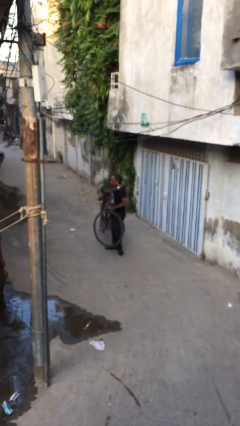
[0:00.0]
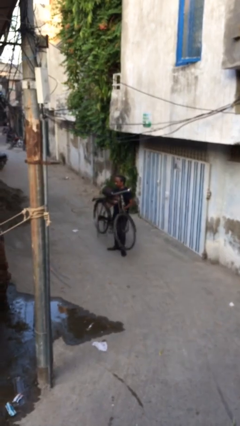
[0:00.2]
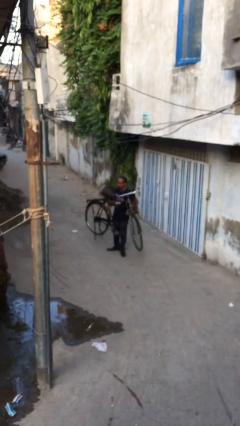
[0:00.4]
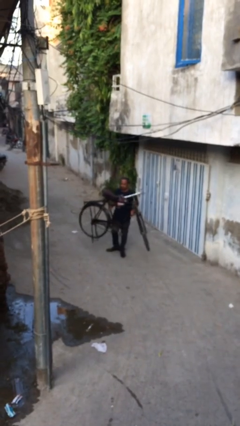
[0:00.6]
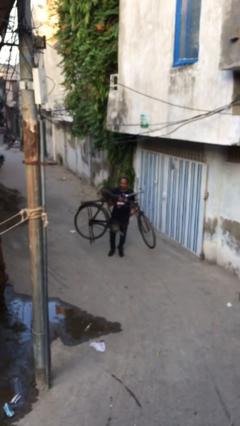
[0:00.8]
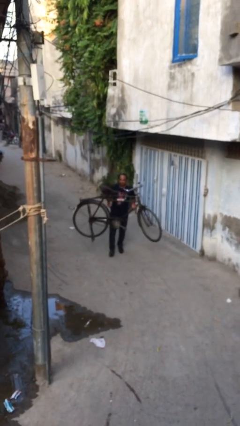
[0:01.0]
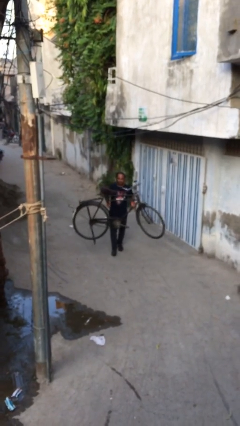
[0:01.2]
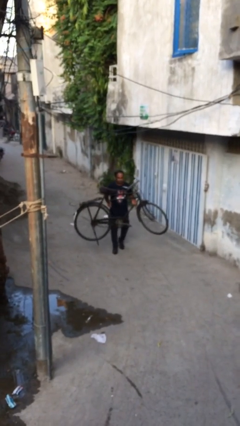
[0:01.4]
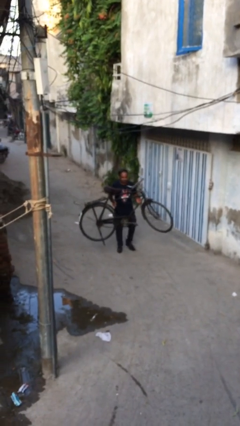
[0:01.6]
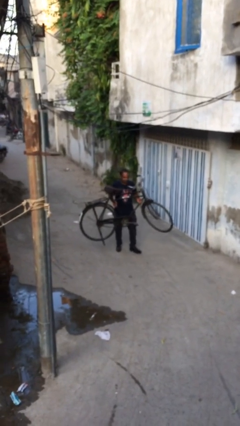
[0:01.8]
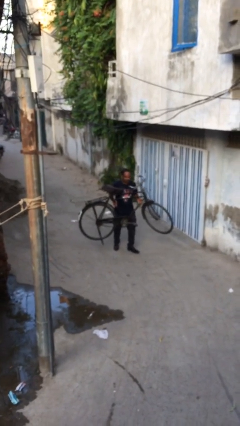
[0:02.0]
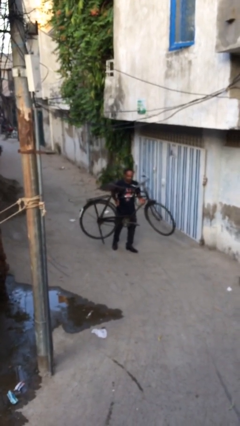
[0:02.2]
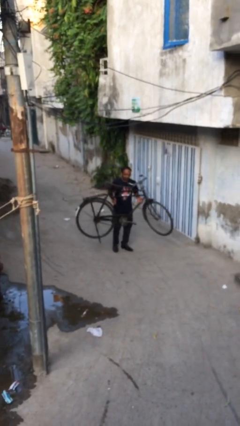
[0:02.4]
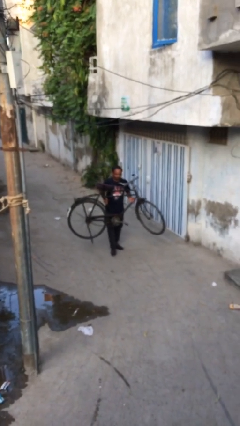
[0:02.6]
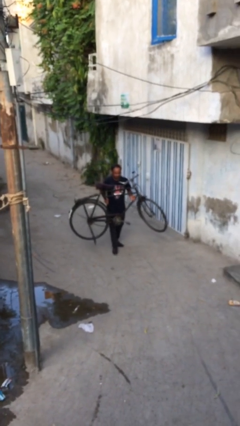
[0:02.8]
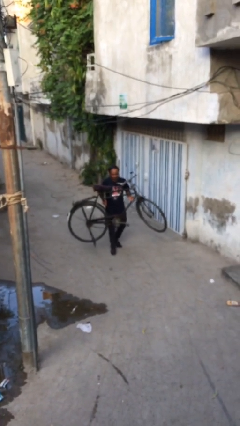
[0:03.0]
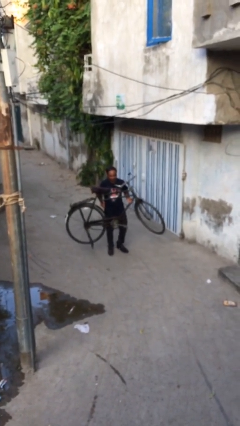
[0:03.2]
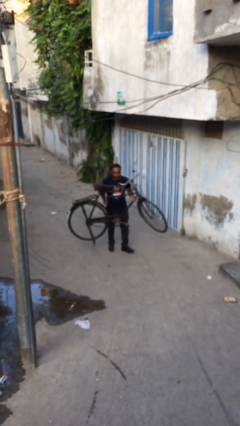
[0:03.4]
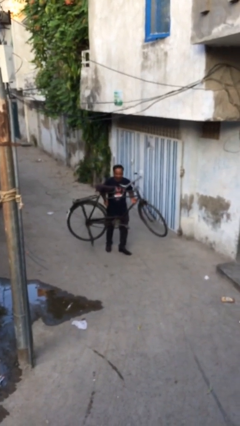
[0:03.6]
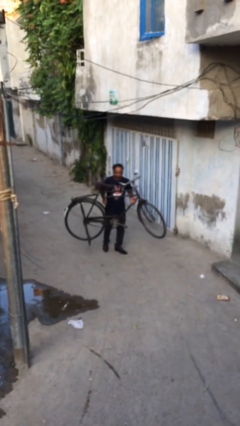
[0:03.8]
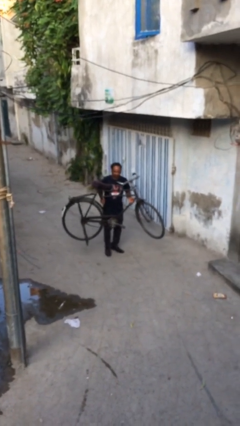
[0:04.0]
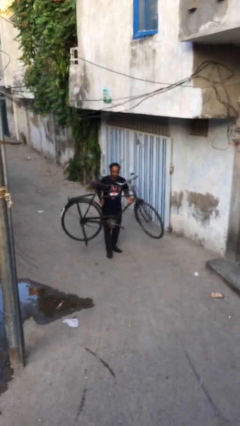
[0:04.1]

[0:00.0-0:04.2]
person carries heavy object

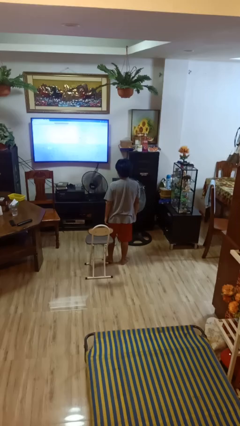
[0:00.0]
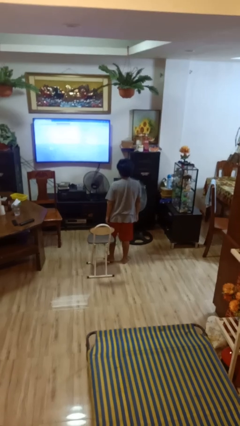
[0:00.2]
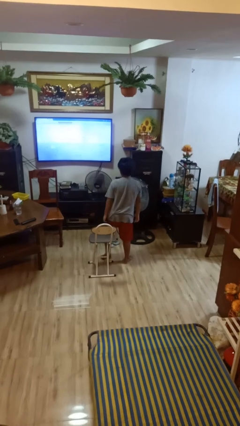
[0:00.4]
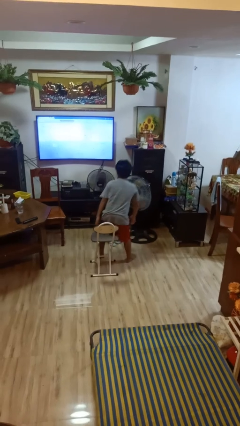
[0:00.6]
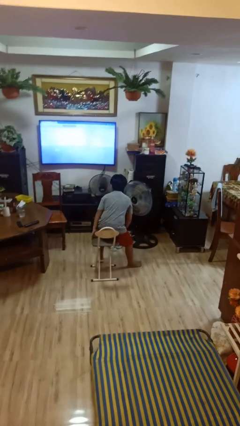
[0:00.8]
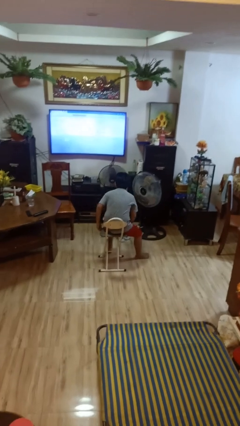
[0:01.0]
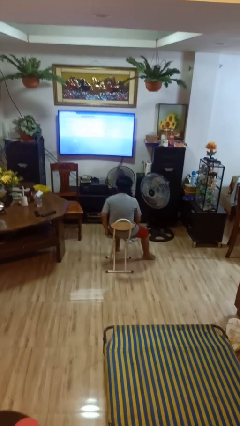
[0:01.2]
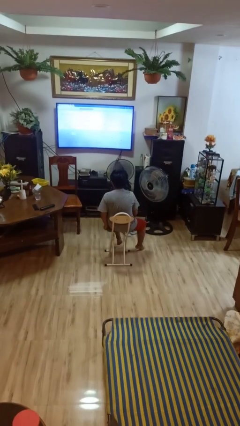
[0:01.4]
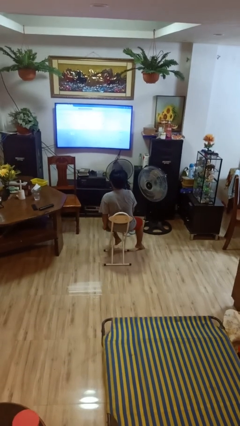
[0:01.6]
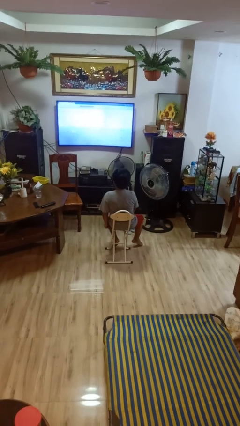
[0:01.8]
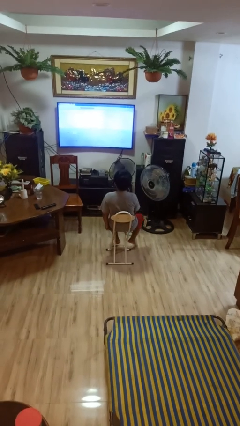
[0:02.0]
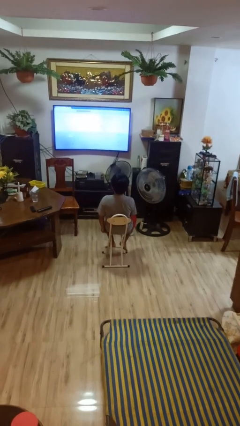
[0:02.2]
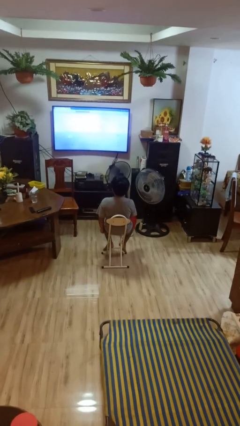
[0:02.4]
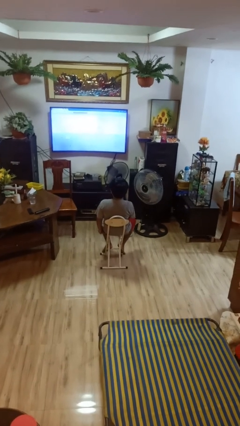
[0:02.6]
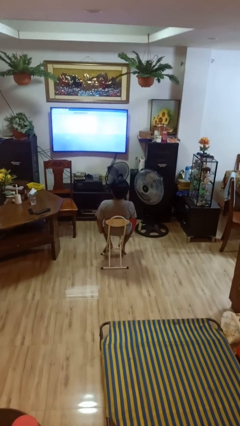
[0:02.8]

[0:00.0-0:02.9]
person sits down

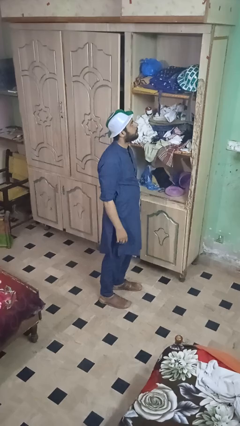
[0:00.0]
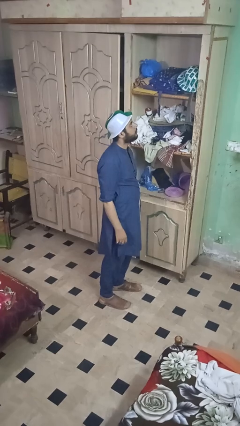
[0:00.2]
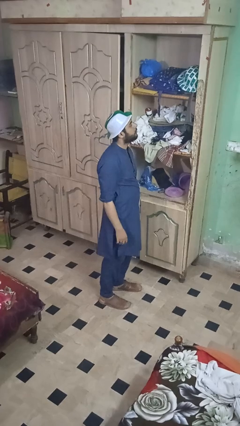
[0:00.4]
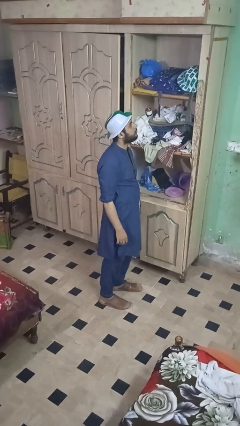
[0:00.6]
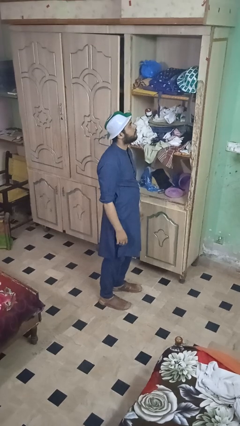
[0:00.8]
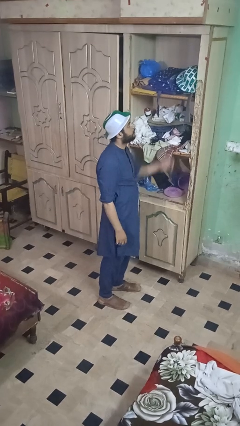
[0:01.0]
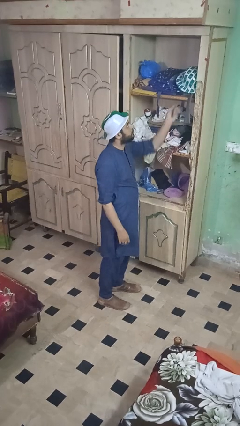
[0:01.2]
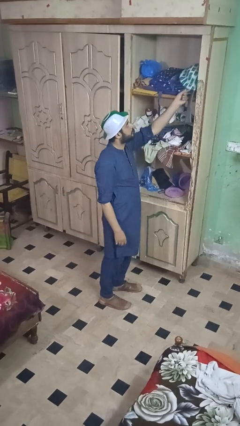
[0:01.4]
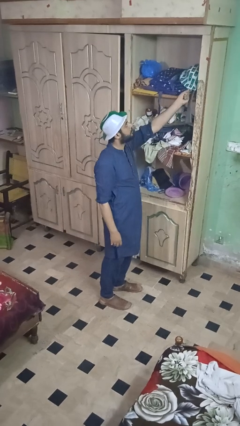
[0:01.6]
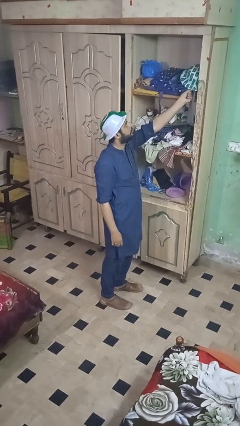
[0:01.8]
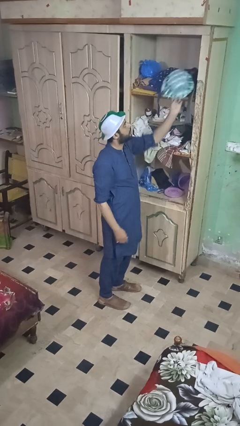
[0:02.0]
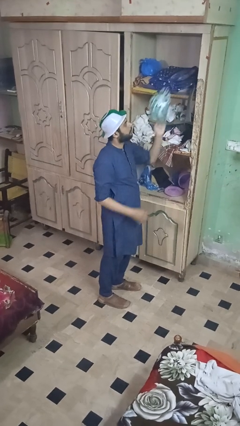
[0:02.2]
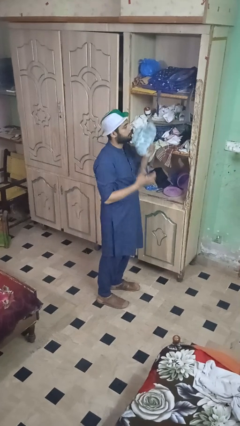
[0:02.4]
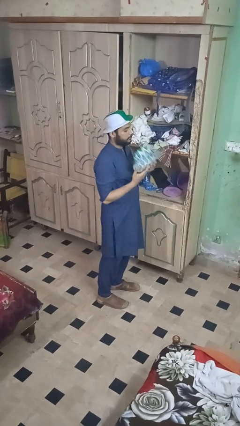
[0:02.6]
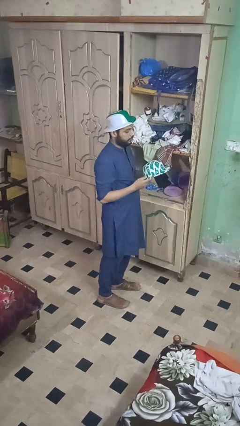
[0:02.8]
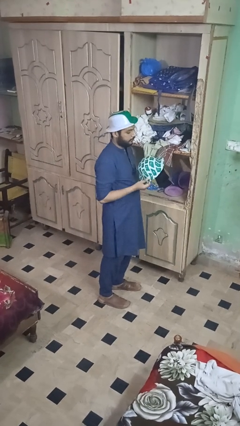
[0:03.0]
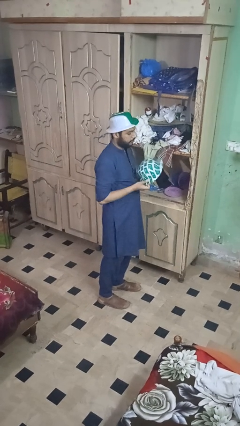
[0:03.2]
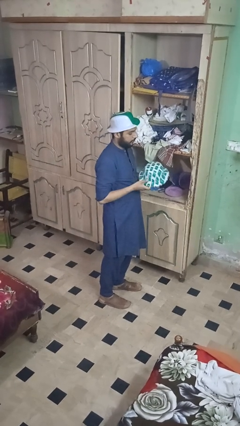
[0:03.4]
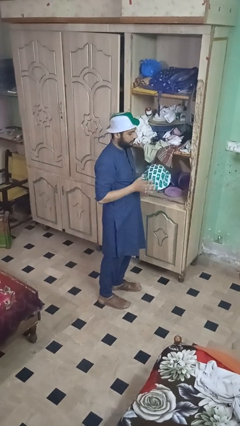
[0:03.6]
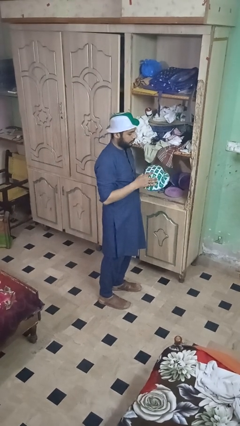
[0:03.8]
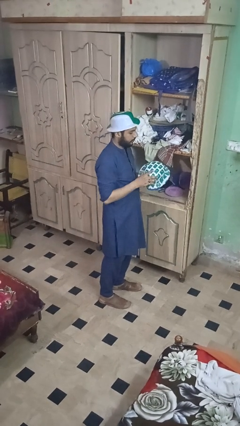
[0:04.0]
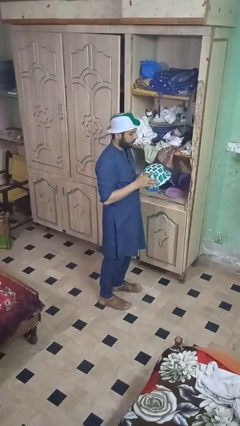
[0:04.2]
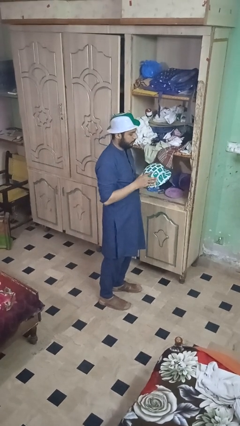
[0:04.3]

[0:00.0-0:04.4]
person picks up object from shelf

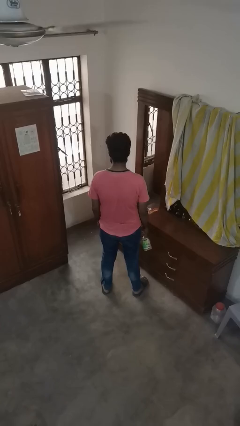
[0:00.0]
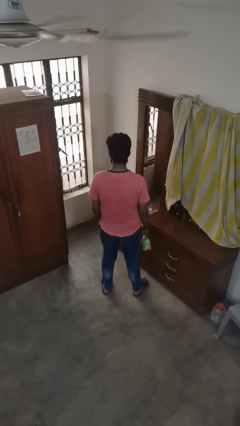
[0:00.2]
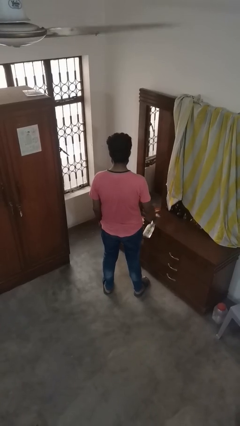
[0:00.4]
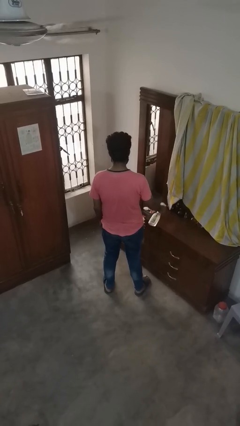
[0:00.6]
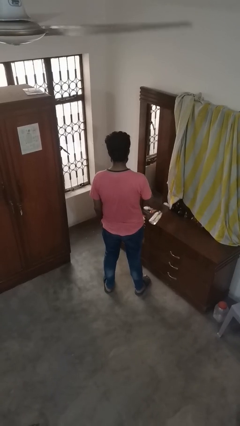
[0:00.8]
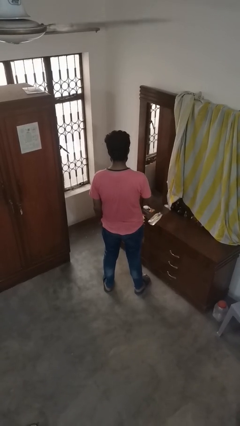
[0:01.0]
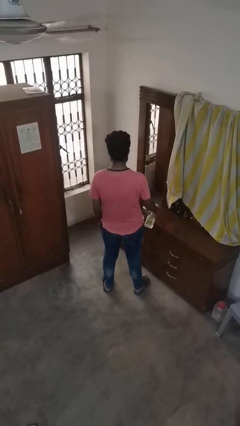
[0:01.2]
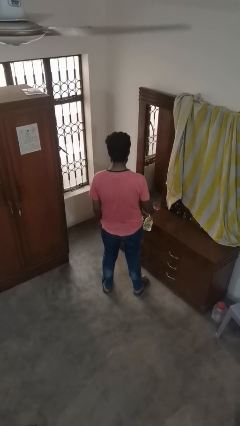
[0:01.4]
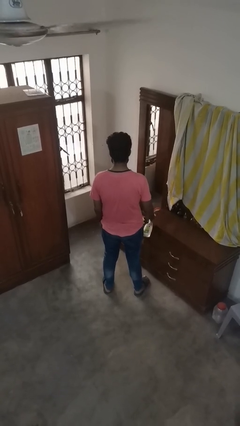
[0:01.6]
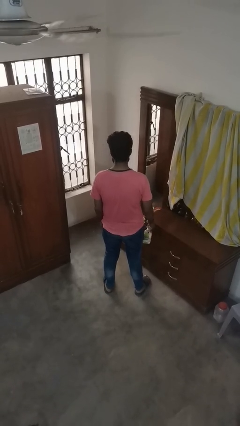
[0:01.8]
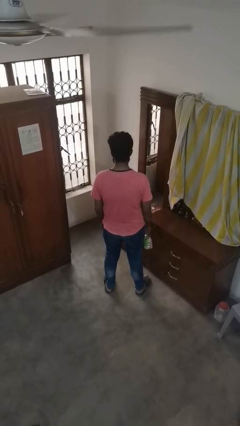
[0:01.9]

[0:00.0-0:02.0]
person sprays from bottle

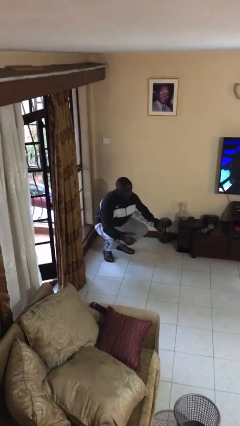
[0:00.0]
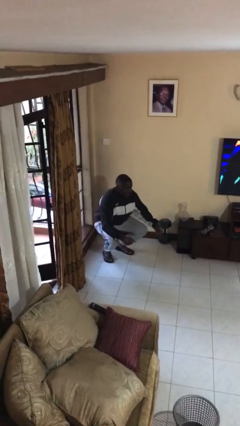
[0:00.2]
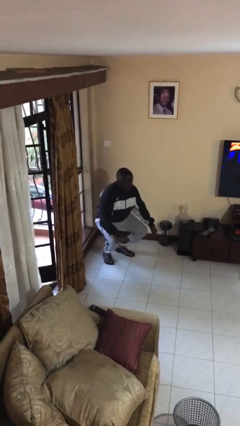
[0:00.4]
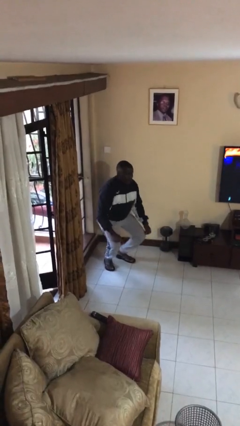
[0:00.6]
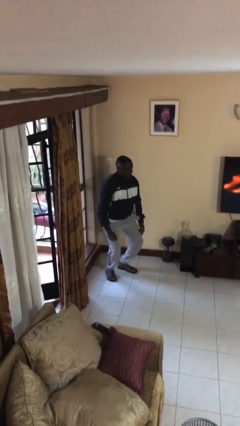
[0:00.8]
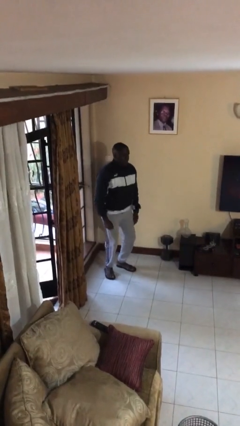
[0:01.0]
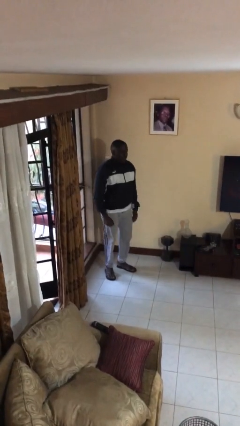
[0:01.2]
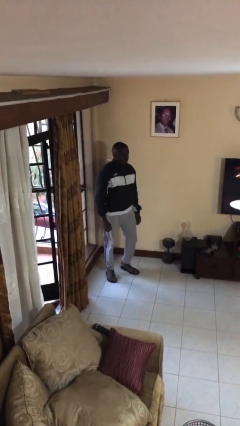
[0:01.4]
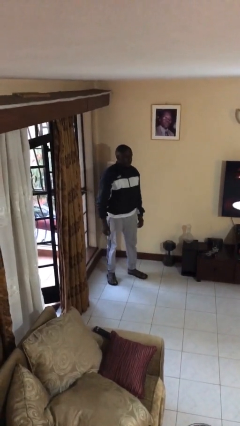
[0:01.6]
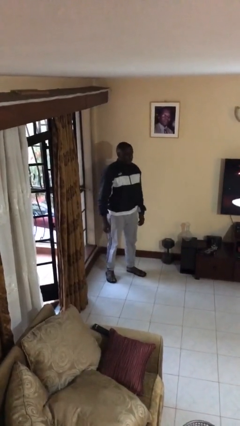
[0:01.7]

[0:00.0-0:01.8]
person stands up

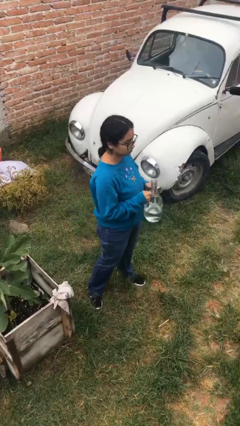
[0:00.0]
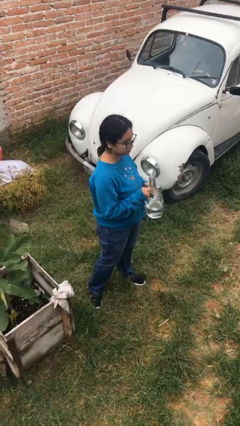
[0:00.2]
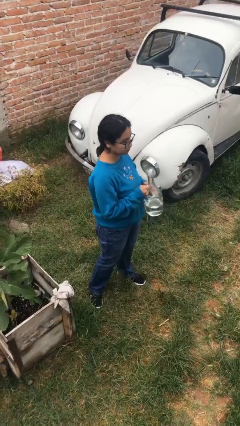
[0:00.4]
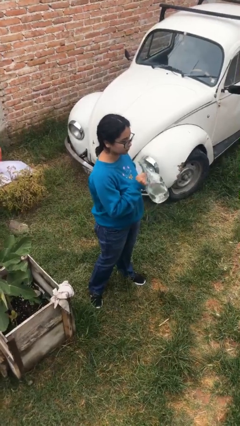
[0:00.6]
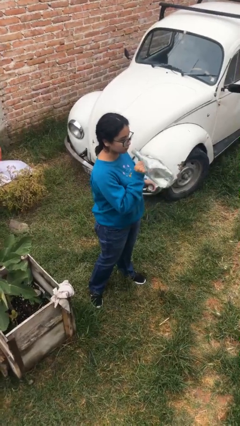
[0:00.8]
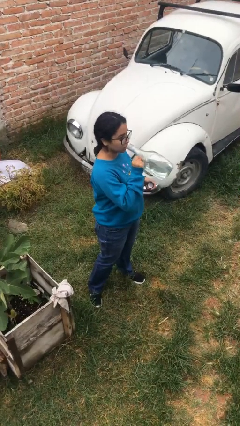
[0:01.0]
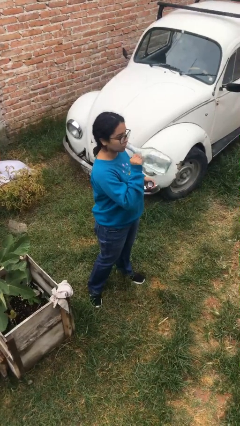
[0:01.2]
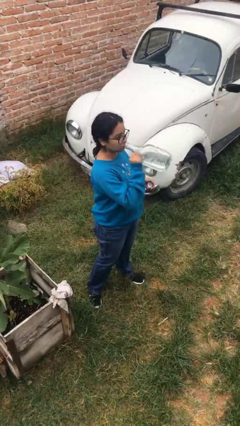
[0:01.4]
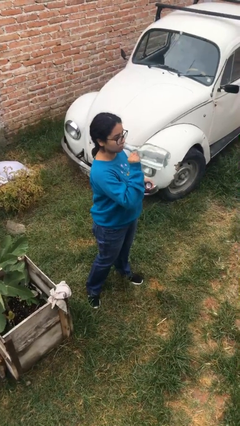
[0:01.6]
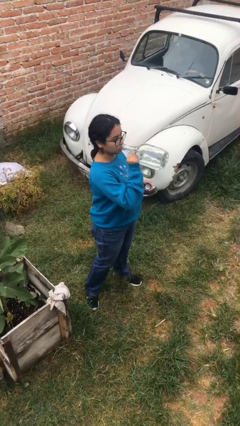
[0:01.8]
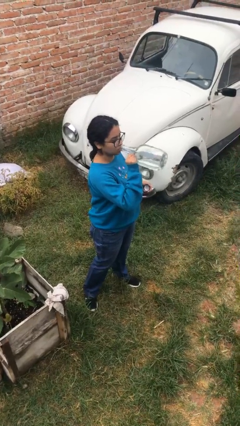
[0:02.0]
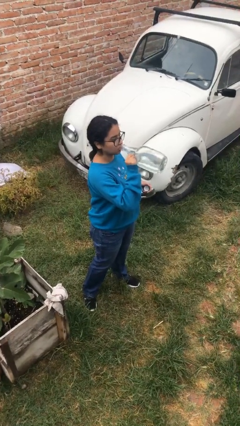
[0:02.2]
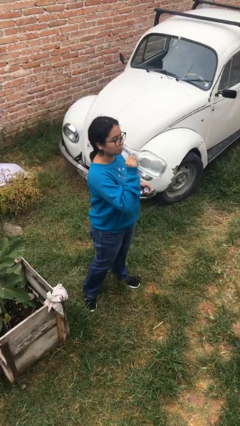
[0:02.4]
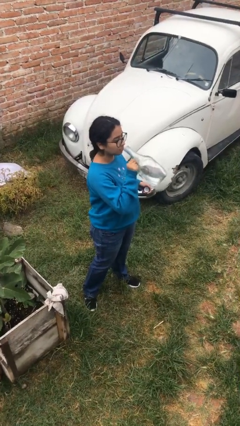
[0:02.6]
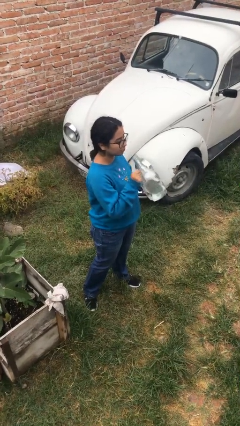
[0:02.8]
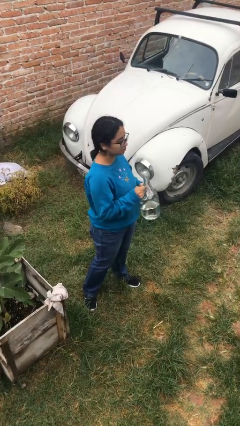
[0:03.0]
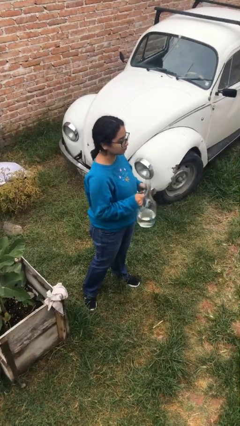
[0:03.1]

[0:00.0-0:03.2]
person drinks from bottle
